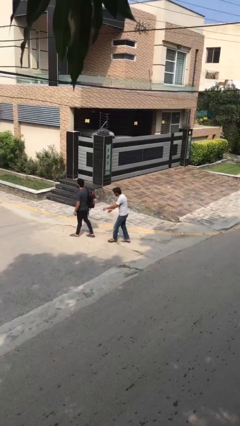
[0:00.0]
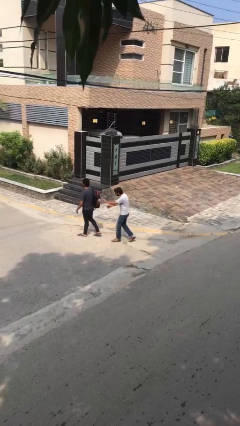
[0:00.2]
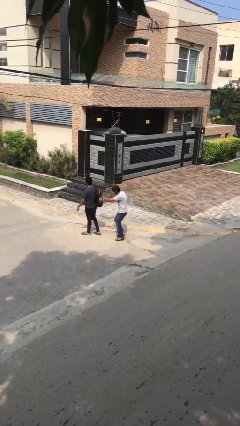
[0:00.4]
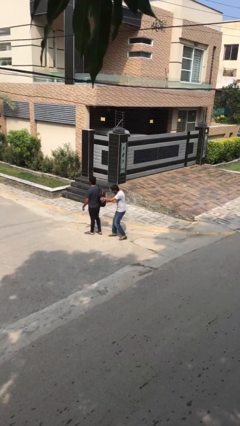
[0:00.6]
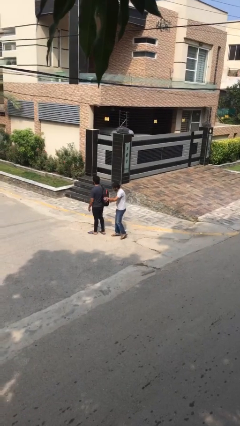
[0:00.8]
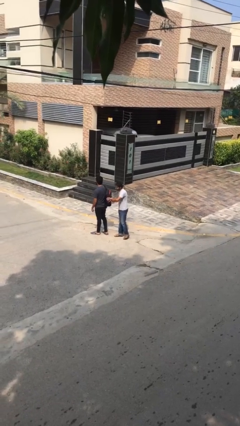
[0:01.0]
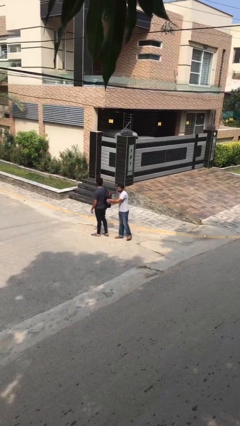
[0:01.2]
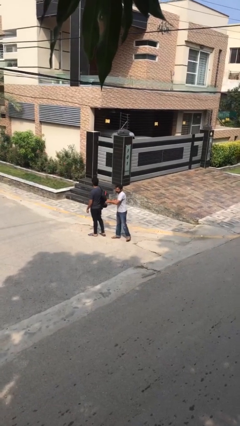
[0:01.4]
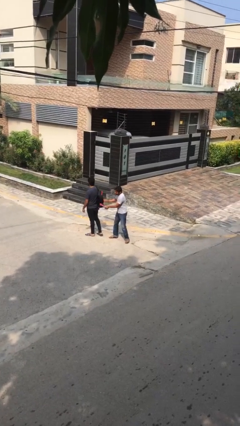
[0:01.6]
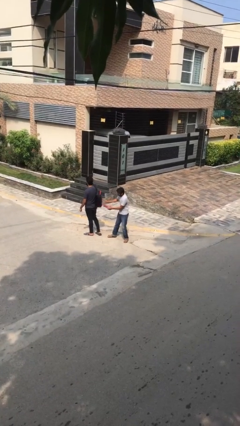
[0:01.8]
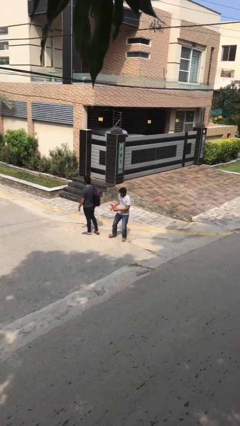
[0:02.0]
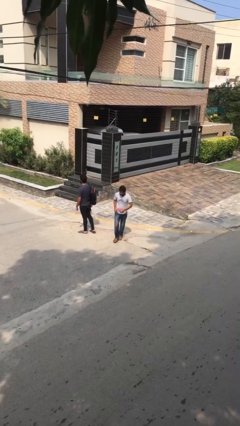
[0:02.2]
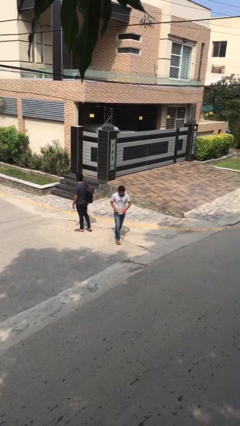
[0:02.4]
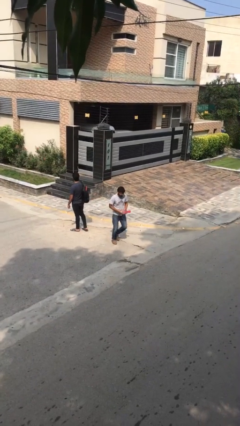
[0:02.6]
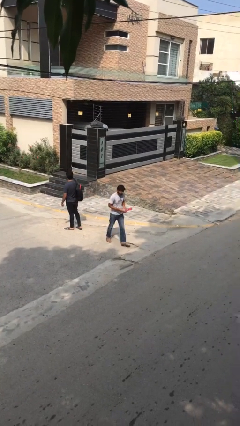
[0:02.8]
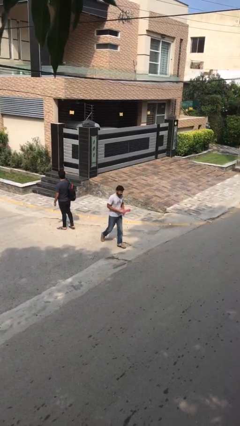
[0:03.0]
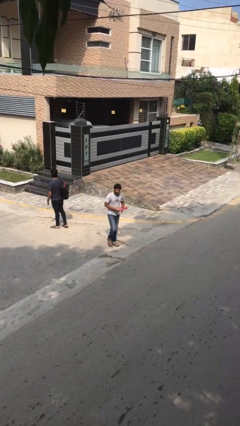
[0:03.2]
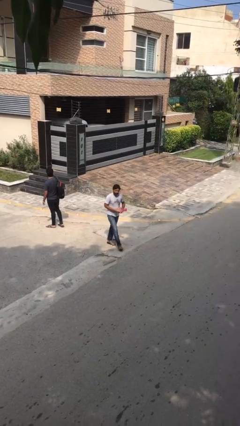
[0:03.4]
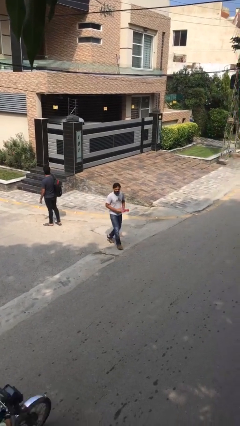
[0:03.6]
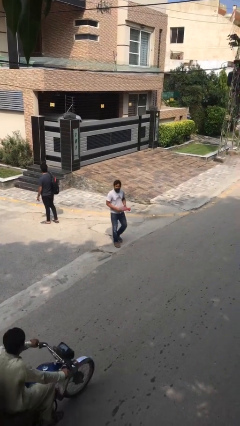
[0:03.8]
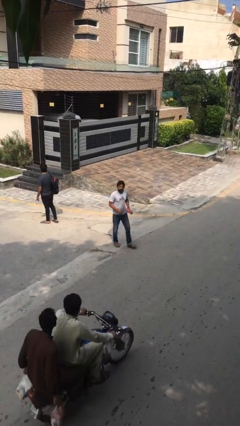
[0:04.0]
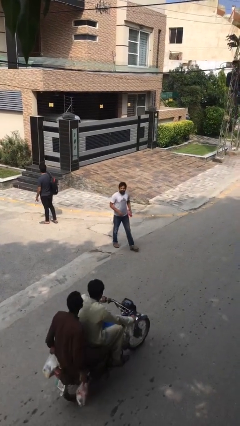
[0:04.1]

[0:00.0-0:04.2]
person steals object from person

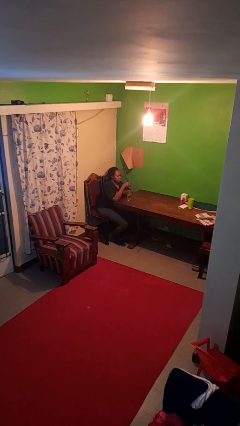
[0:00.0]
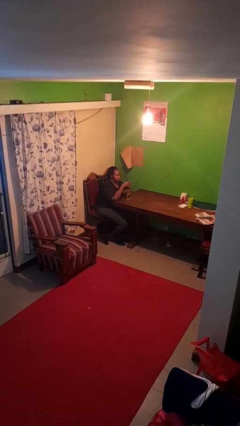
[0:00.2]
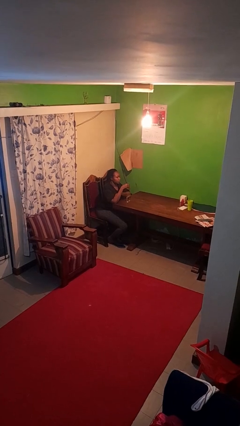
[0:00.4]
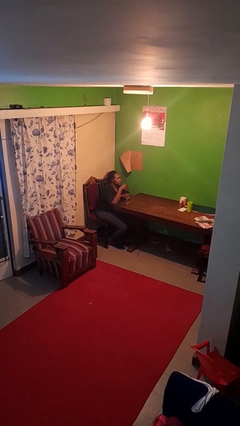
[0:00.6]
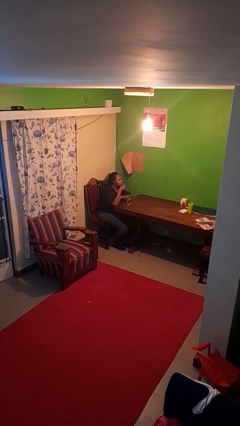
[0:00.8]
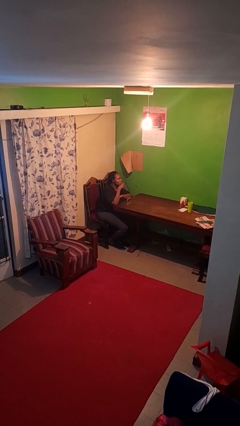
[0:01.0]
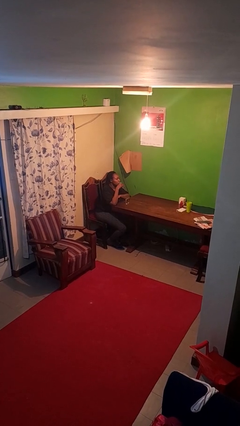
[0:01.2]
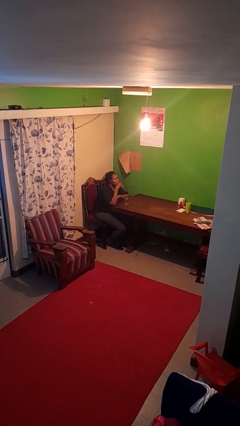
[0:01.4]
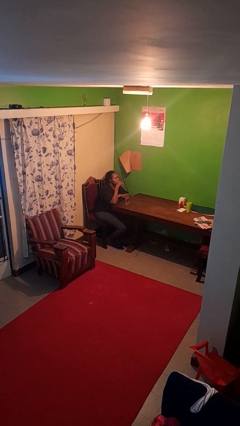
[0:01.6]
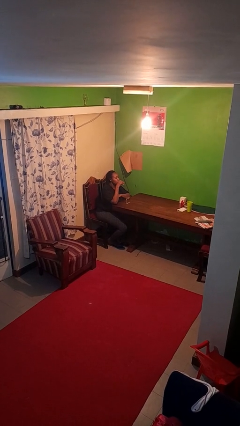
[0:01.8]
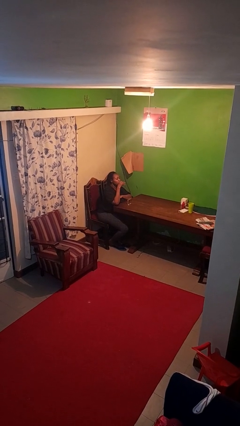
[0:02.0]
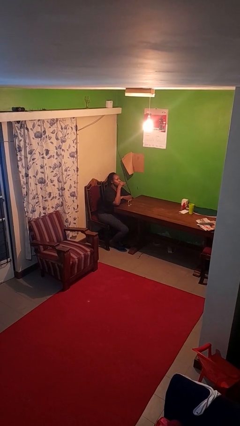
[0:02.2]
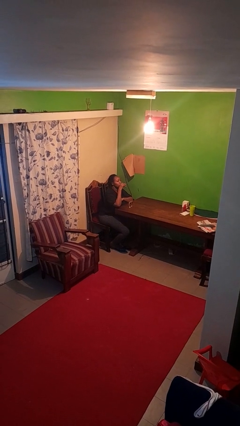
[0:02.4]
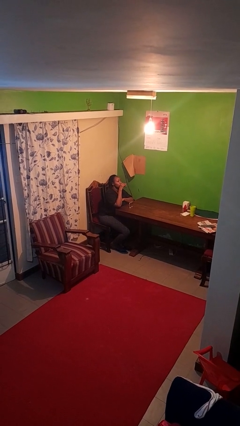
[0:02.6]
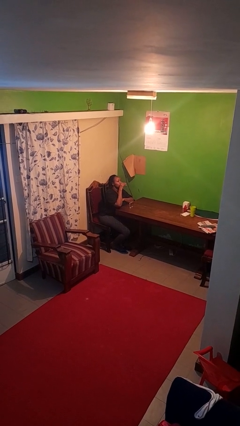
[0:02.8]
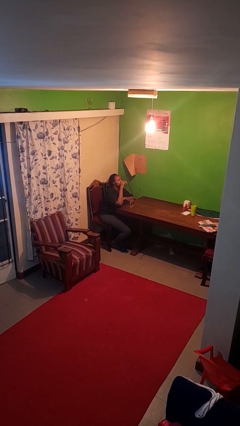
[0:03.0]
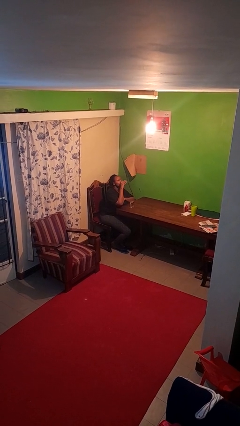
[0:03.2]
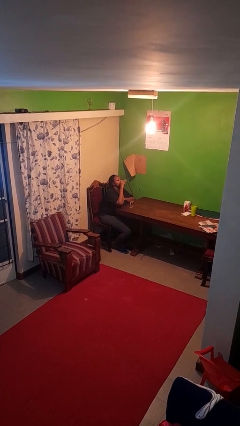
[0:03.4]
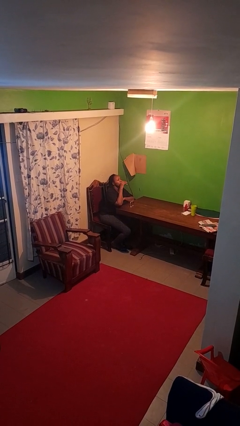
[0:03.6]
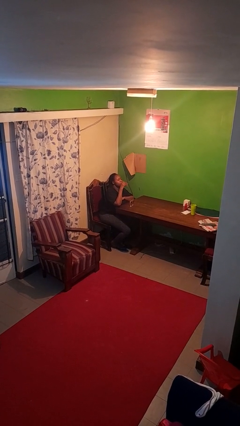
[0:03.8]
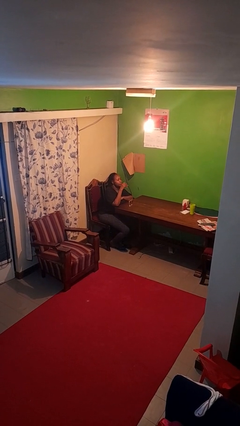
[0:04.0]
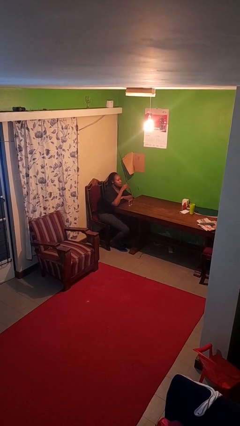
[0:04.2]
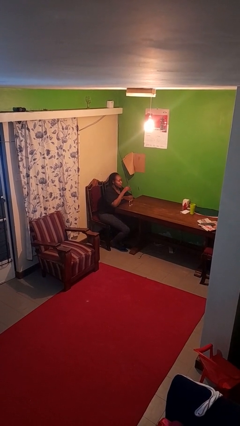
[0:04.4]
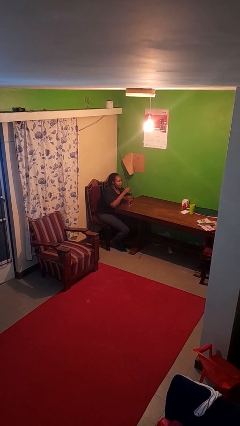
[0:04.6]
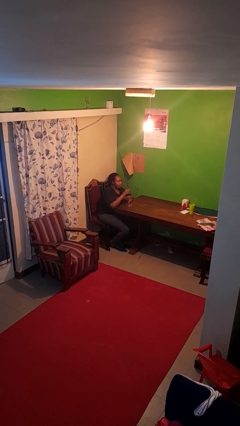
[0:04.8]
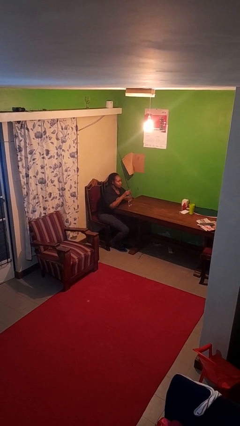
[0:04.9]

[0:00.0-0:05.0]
person drinks from shotglass

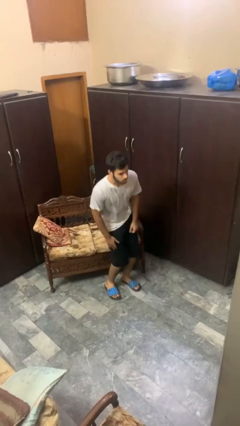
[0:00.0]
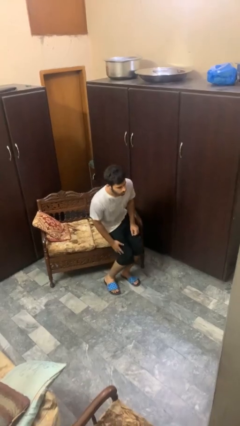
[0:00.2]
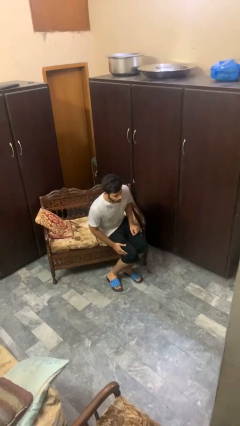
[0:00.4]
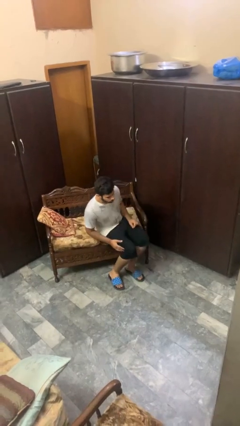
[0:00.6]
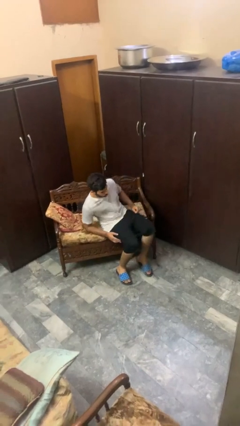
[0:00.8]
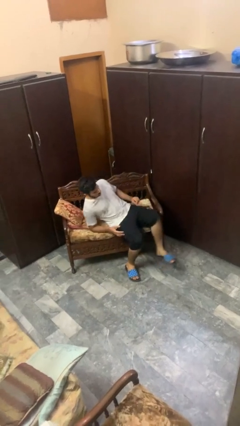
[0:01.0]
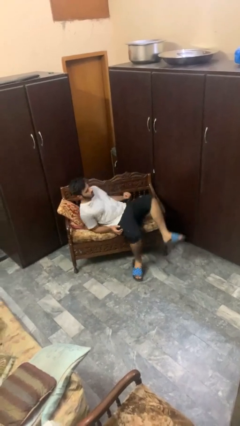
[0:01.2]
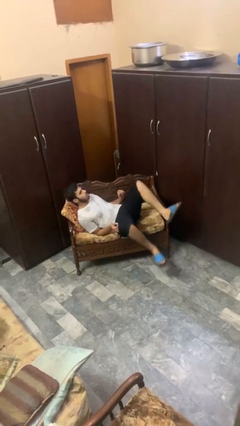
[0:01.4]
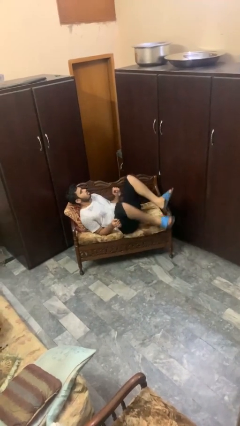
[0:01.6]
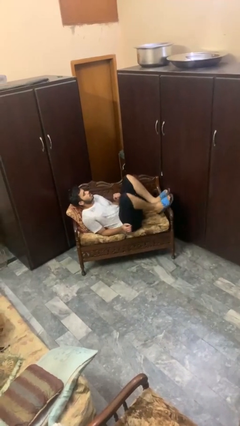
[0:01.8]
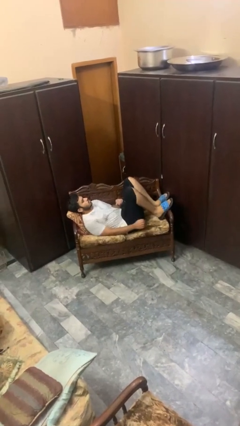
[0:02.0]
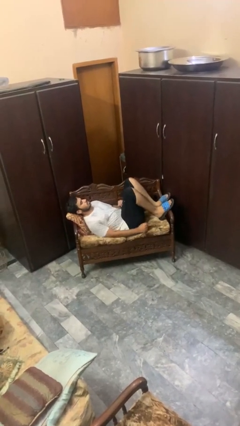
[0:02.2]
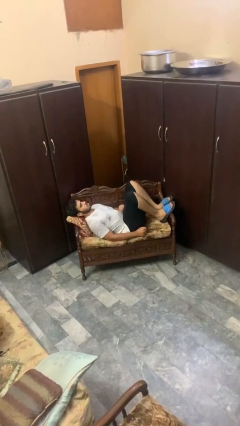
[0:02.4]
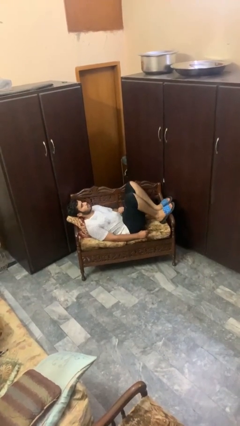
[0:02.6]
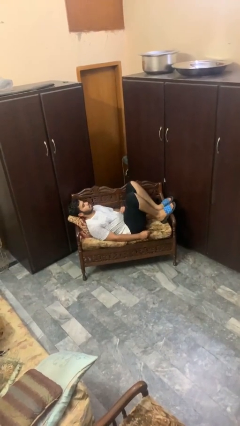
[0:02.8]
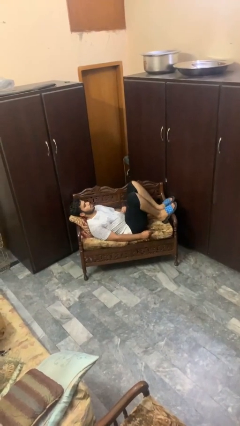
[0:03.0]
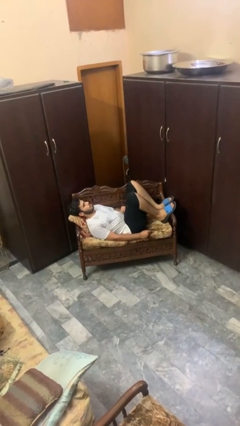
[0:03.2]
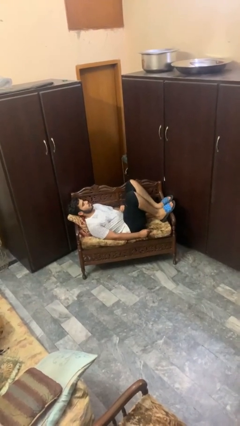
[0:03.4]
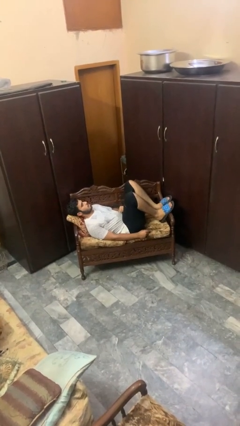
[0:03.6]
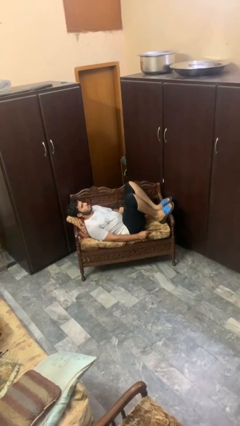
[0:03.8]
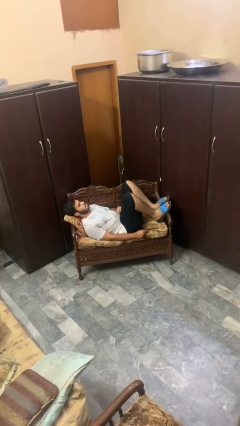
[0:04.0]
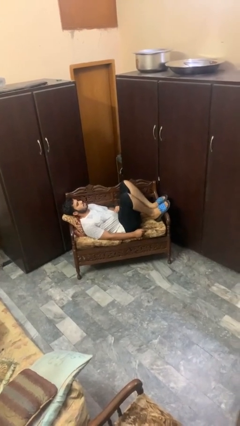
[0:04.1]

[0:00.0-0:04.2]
person lies down on couch

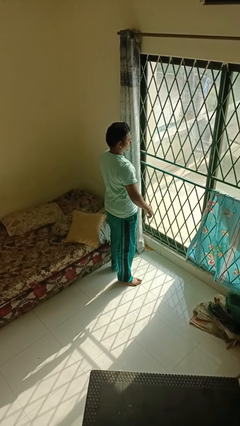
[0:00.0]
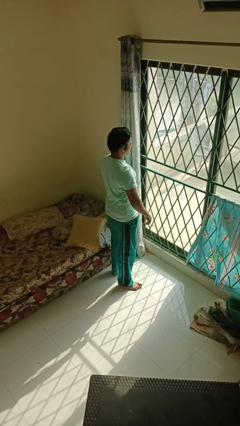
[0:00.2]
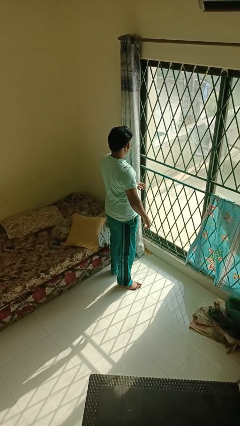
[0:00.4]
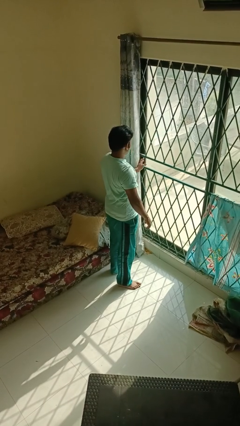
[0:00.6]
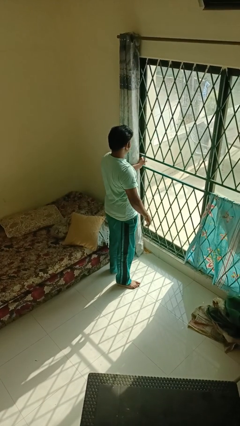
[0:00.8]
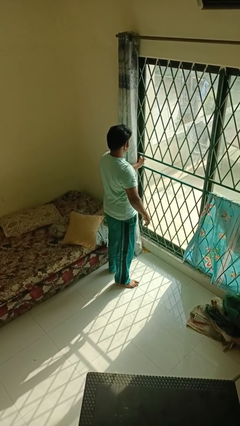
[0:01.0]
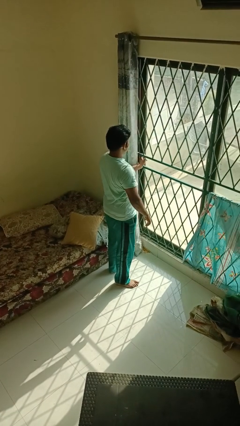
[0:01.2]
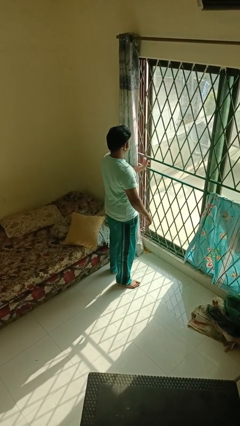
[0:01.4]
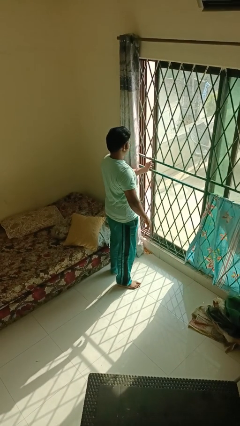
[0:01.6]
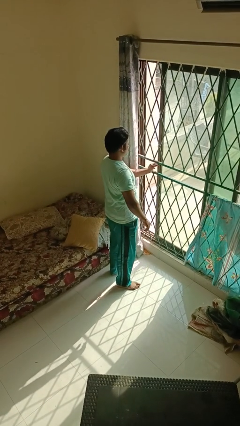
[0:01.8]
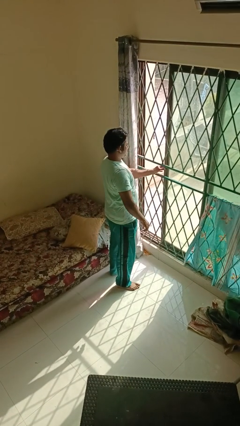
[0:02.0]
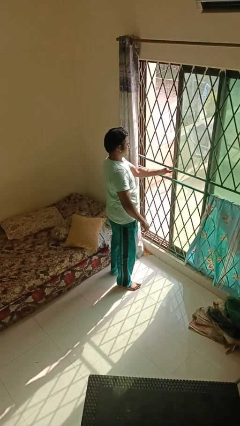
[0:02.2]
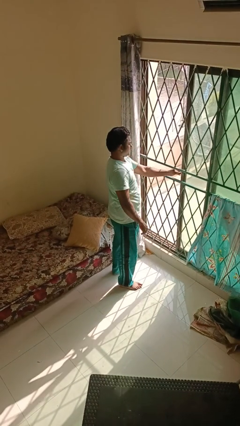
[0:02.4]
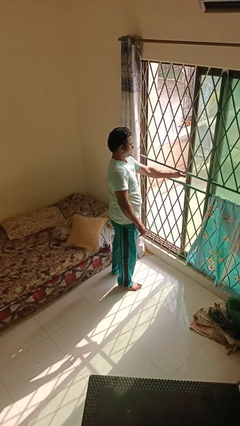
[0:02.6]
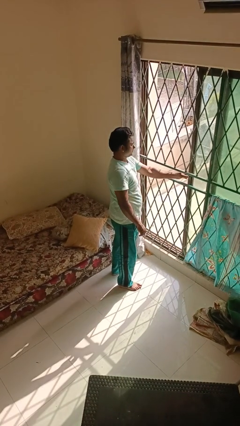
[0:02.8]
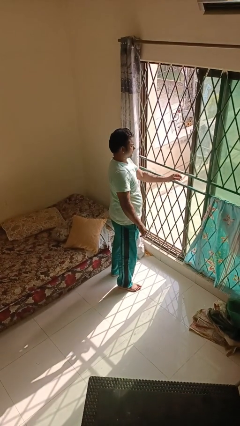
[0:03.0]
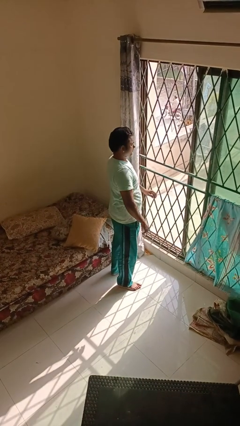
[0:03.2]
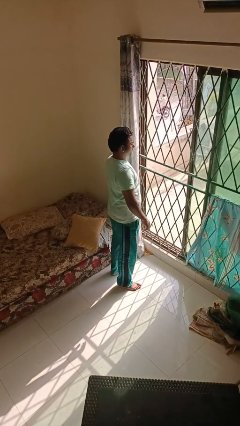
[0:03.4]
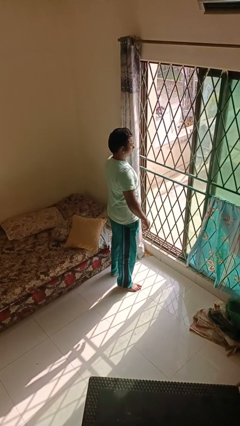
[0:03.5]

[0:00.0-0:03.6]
person opens home window

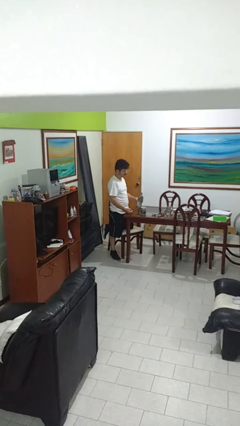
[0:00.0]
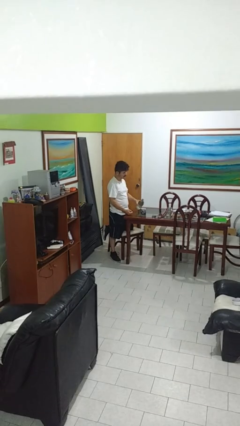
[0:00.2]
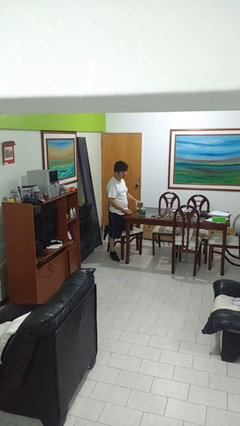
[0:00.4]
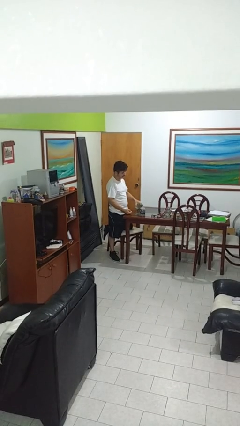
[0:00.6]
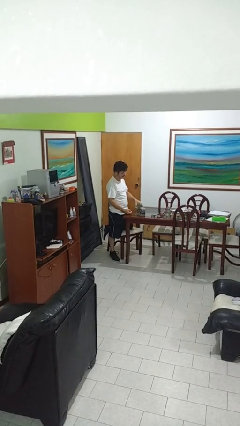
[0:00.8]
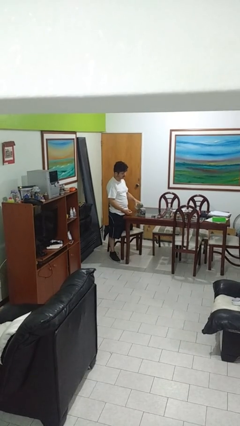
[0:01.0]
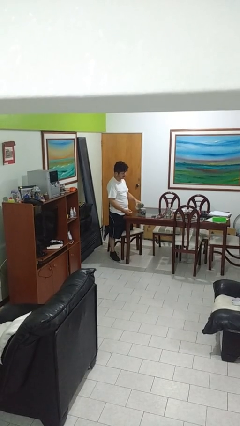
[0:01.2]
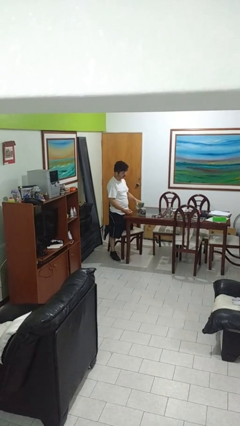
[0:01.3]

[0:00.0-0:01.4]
person pours liquid into cup
